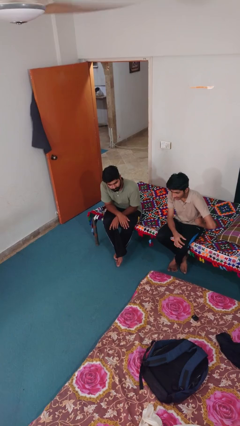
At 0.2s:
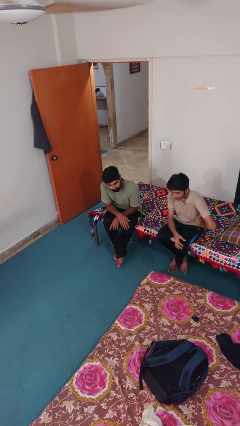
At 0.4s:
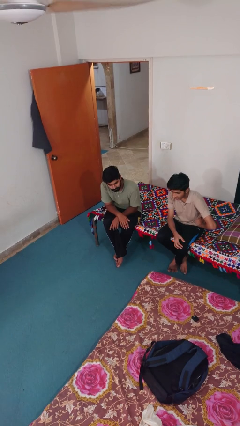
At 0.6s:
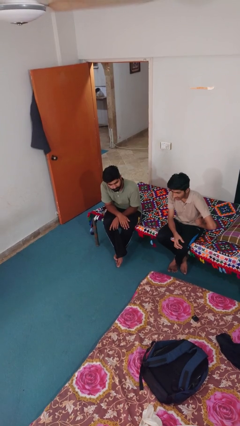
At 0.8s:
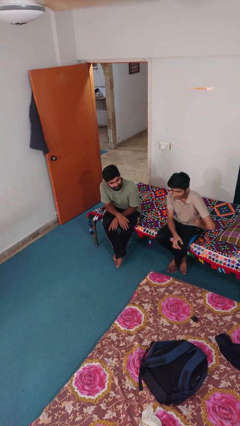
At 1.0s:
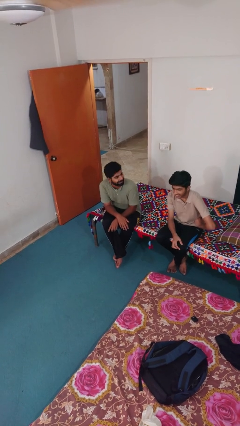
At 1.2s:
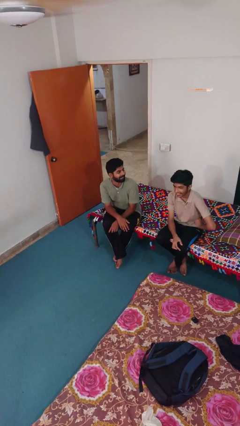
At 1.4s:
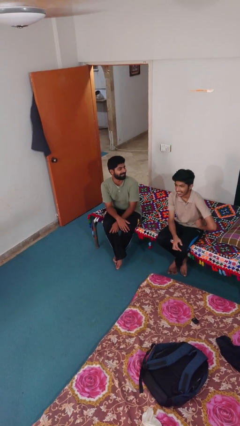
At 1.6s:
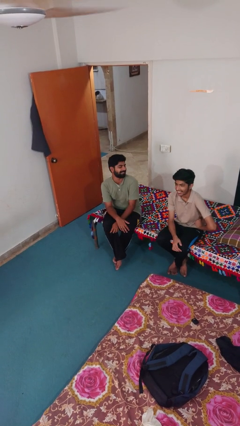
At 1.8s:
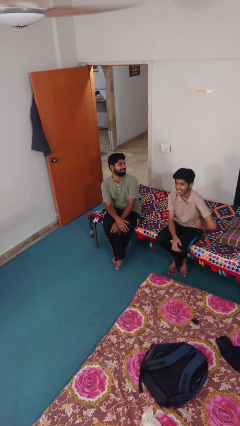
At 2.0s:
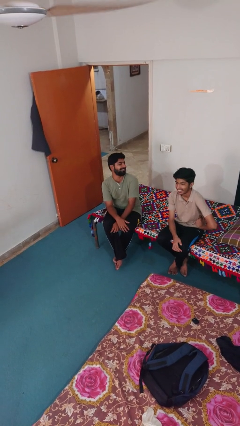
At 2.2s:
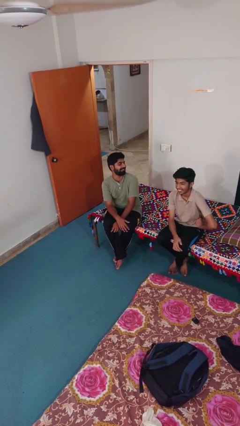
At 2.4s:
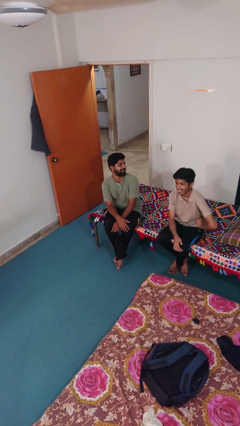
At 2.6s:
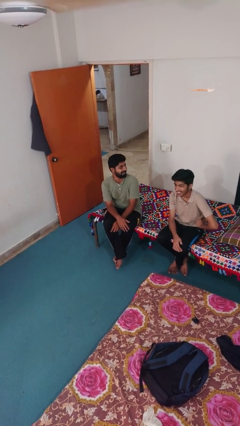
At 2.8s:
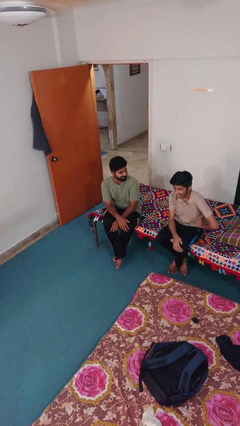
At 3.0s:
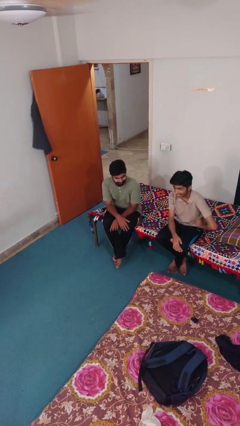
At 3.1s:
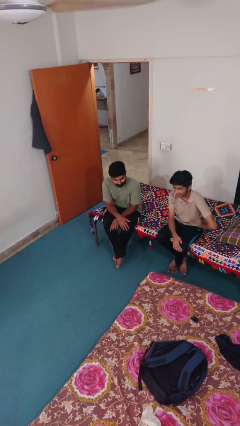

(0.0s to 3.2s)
person laughs with person

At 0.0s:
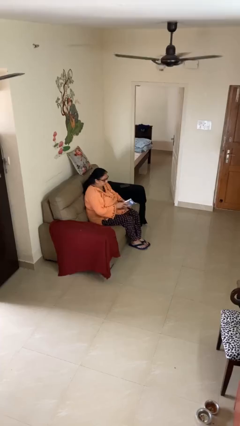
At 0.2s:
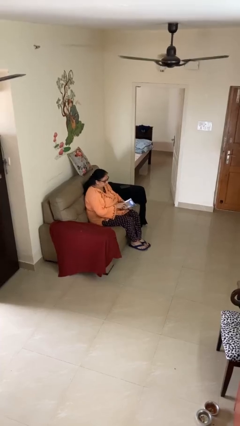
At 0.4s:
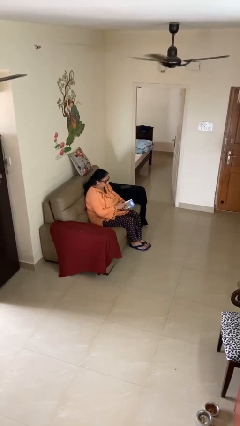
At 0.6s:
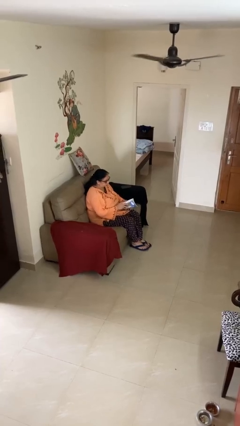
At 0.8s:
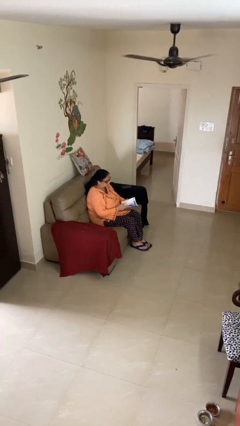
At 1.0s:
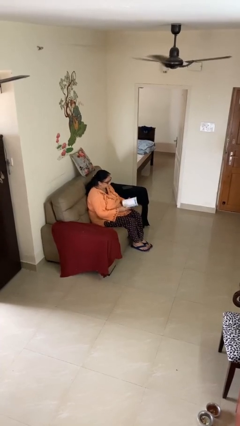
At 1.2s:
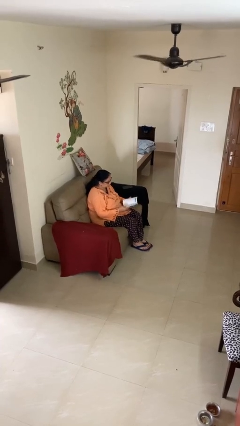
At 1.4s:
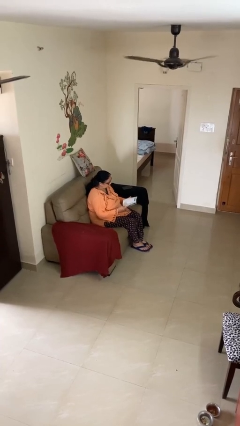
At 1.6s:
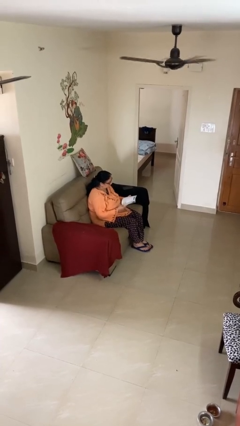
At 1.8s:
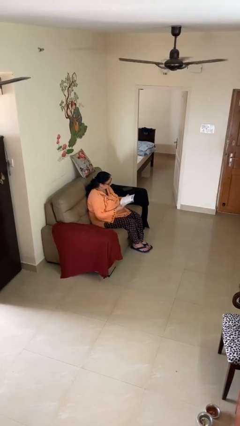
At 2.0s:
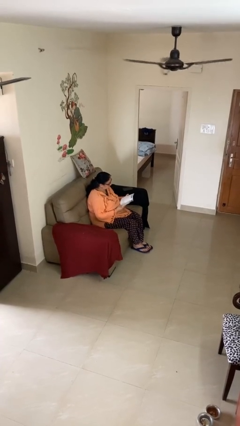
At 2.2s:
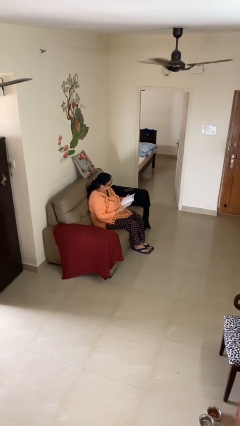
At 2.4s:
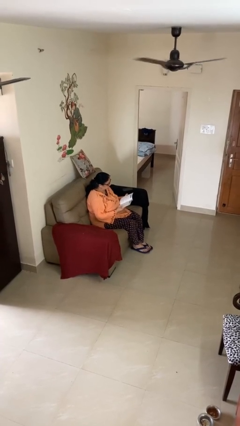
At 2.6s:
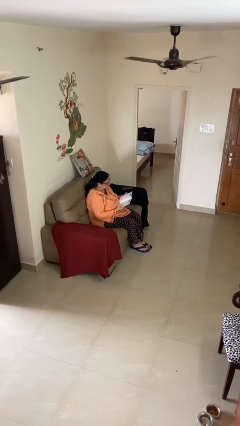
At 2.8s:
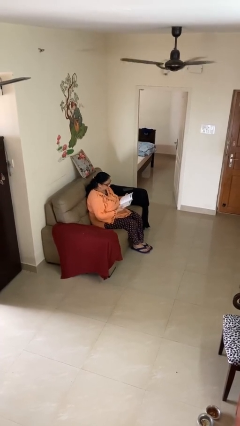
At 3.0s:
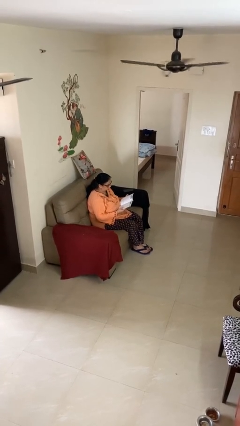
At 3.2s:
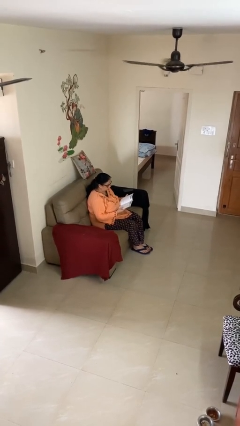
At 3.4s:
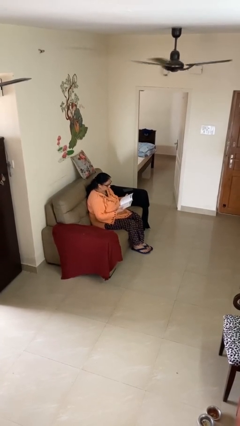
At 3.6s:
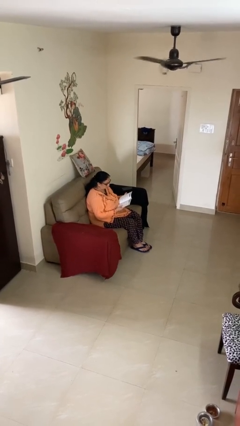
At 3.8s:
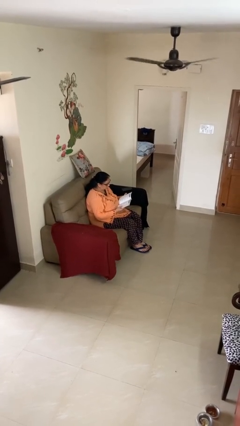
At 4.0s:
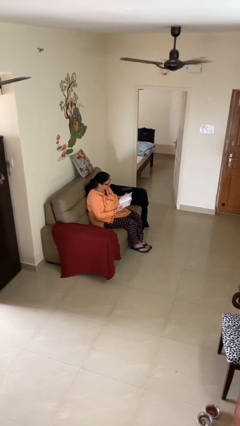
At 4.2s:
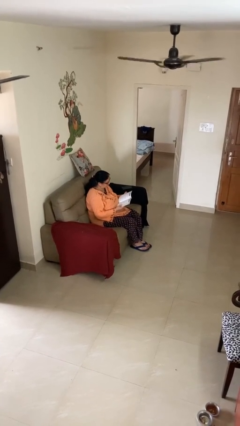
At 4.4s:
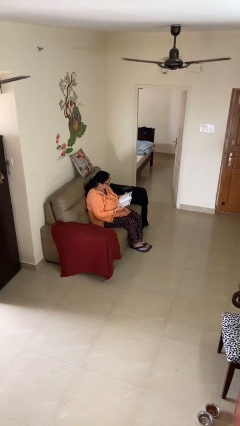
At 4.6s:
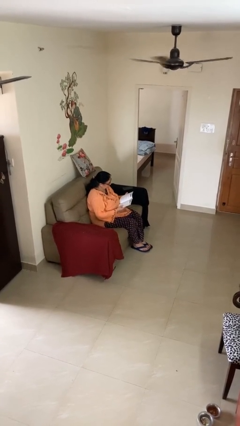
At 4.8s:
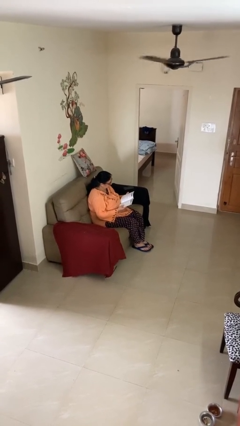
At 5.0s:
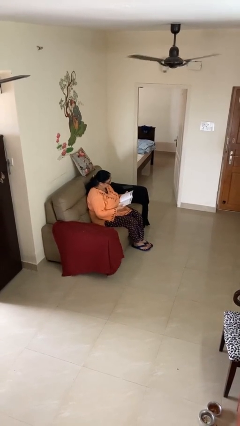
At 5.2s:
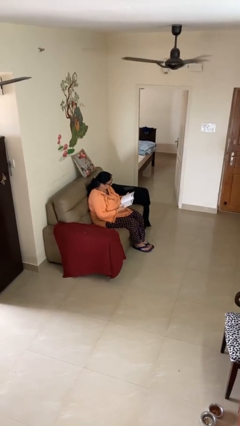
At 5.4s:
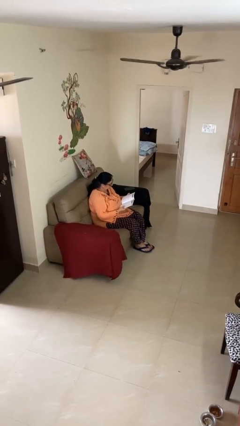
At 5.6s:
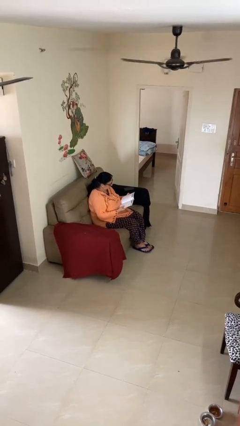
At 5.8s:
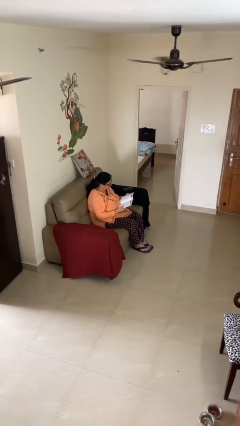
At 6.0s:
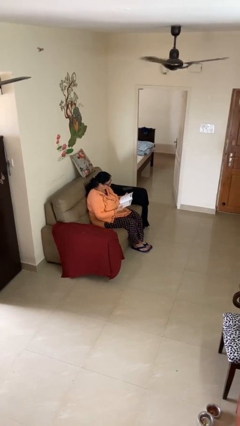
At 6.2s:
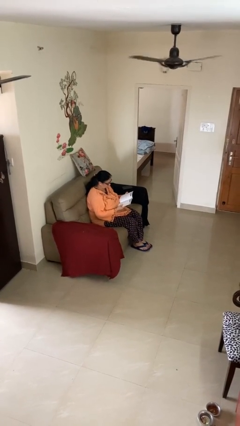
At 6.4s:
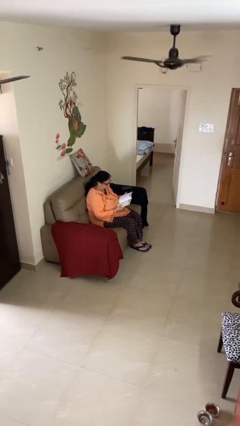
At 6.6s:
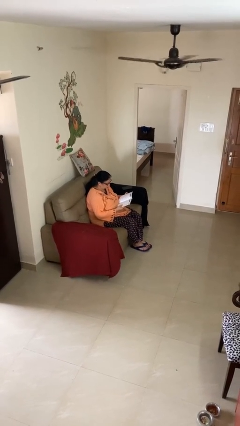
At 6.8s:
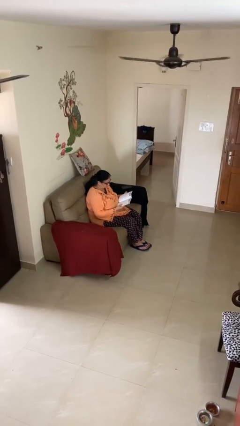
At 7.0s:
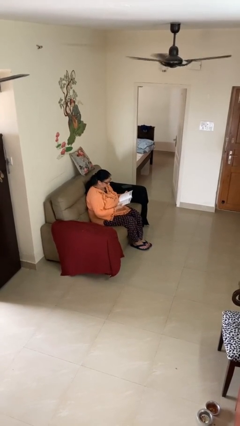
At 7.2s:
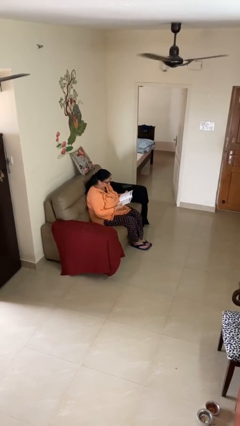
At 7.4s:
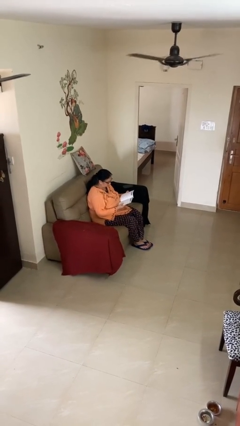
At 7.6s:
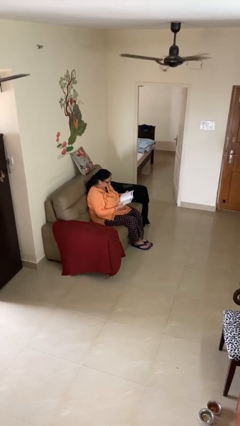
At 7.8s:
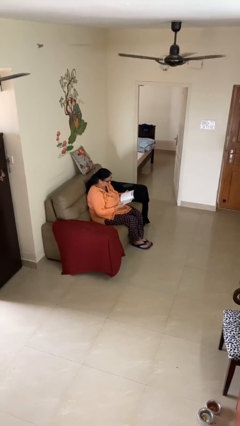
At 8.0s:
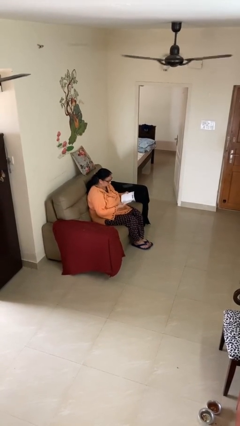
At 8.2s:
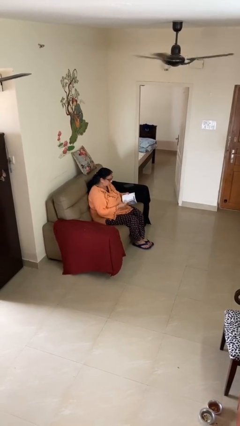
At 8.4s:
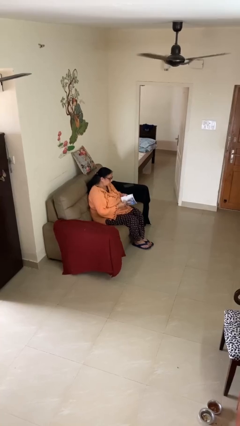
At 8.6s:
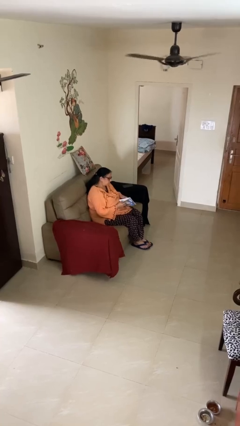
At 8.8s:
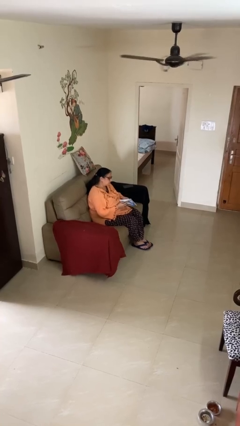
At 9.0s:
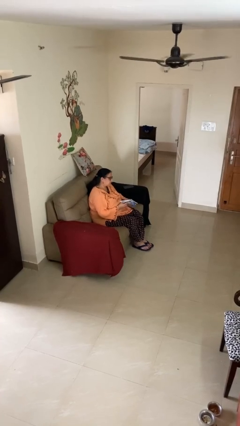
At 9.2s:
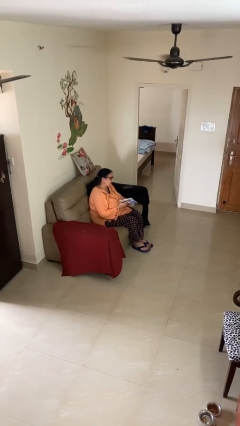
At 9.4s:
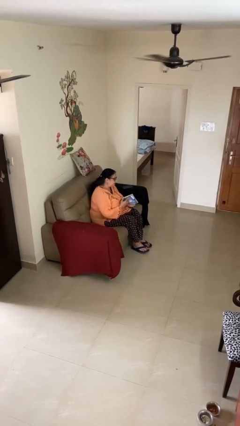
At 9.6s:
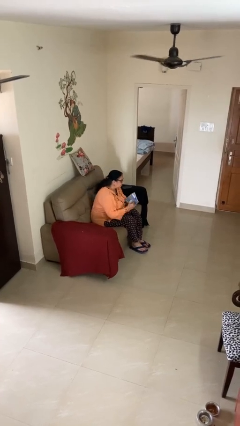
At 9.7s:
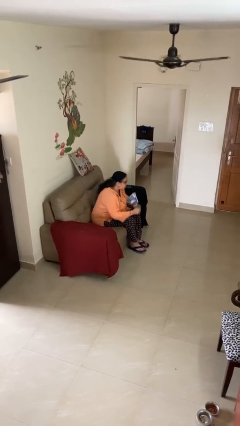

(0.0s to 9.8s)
person reads document

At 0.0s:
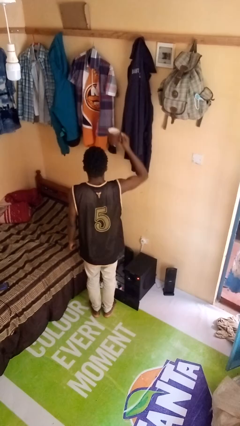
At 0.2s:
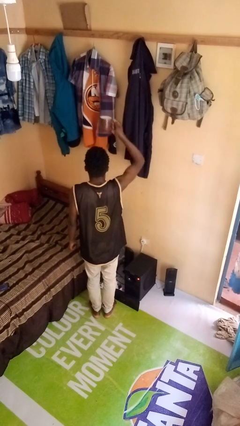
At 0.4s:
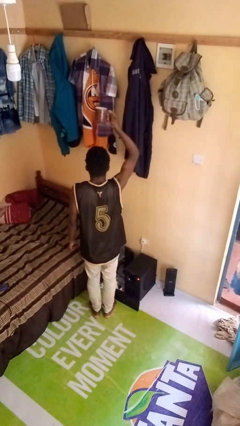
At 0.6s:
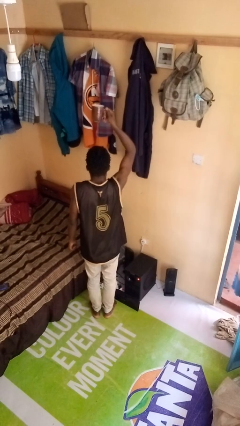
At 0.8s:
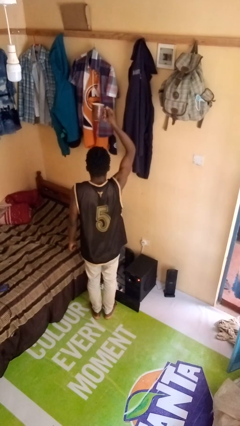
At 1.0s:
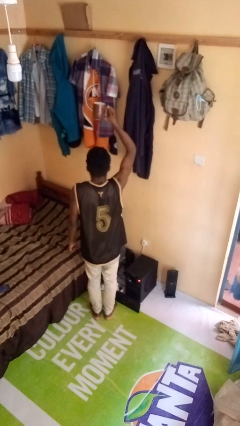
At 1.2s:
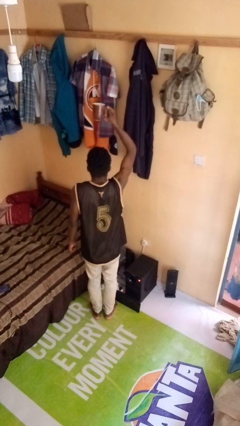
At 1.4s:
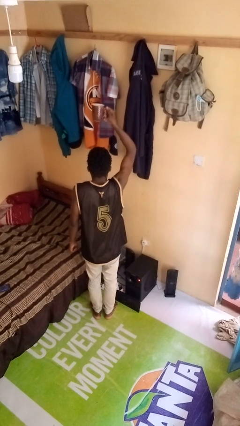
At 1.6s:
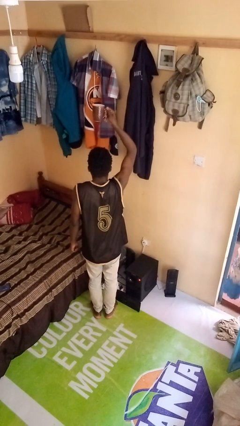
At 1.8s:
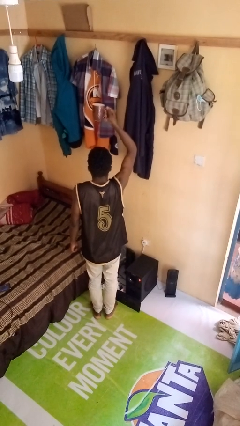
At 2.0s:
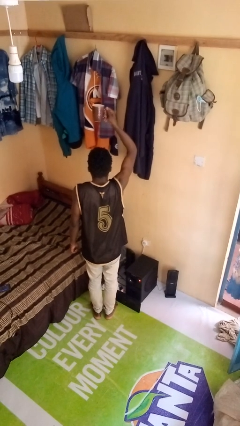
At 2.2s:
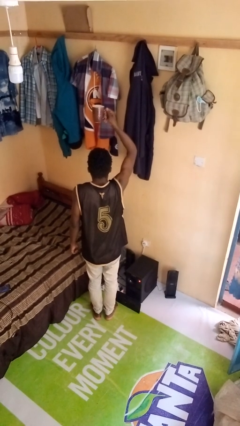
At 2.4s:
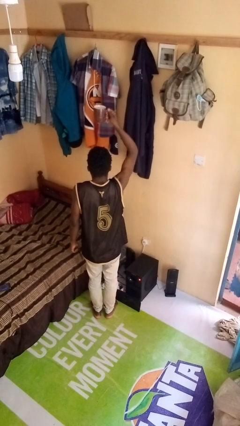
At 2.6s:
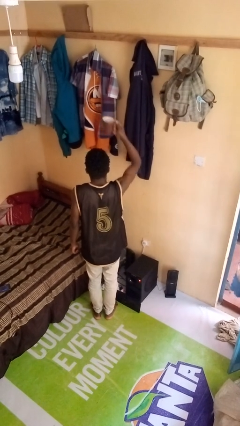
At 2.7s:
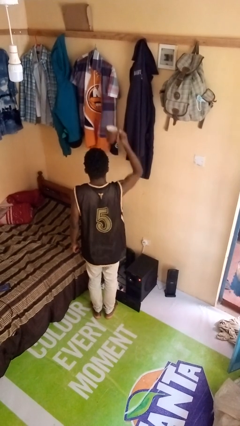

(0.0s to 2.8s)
person holds object above head

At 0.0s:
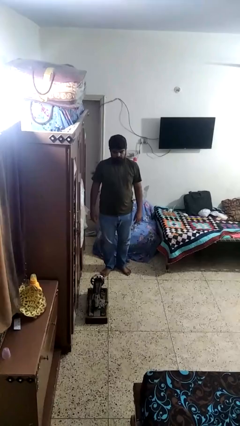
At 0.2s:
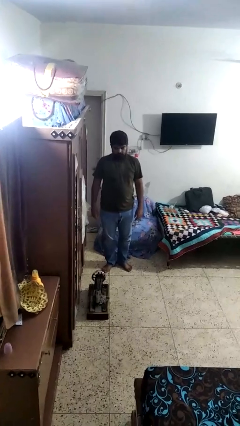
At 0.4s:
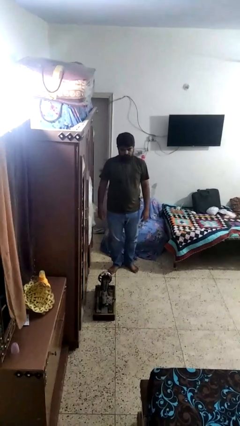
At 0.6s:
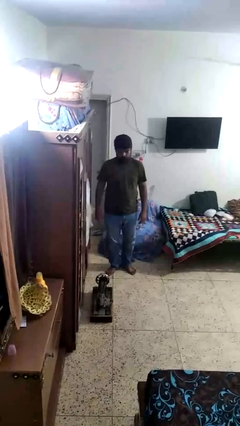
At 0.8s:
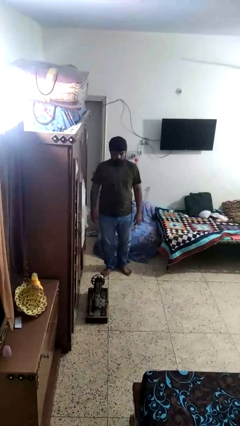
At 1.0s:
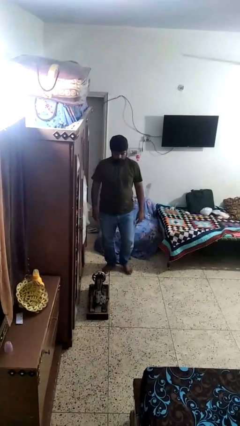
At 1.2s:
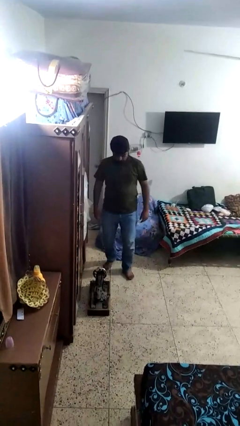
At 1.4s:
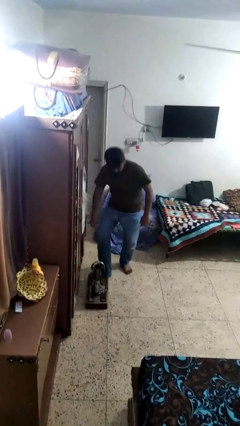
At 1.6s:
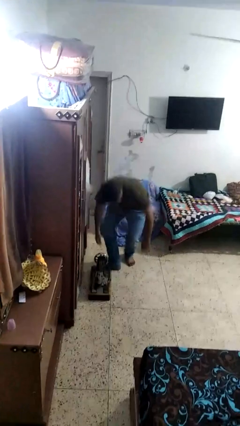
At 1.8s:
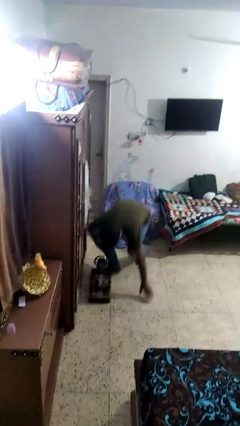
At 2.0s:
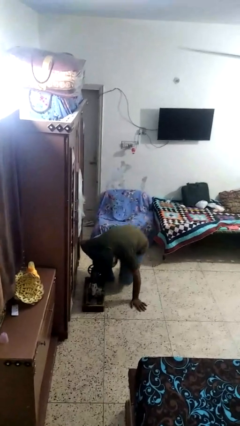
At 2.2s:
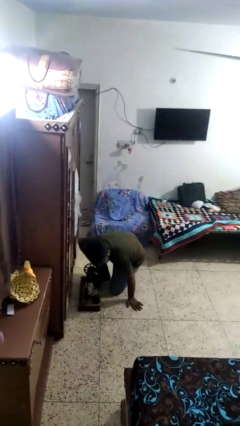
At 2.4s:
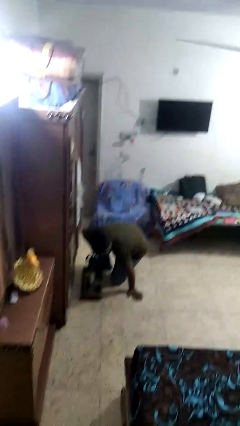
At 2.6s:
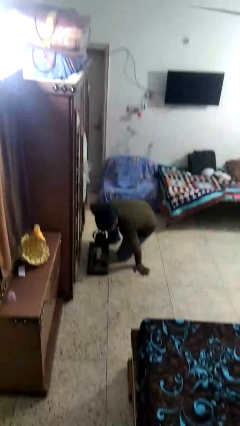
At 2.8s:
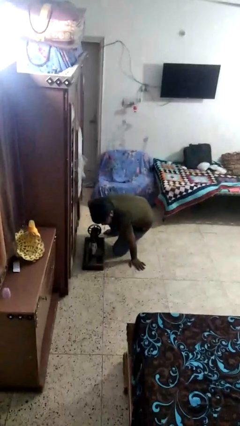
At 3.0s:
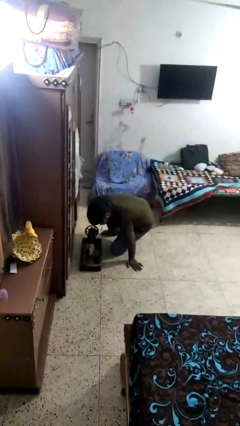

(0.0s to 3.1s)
person trips on object on floor
